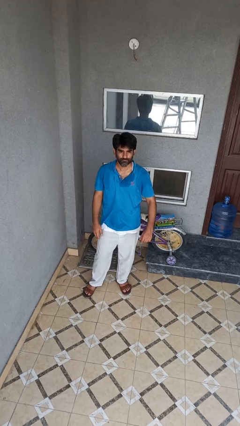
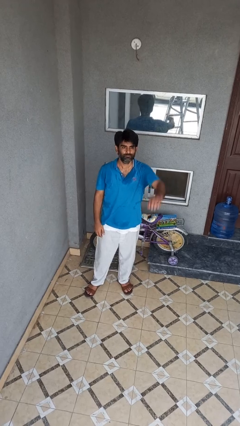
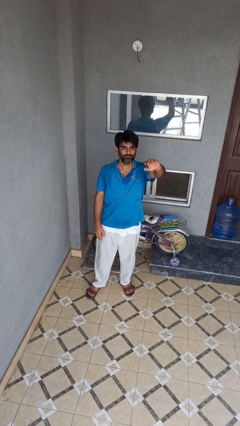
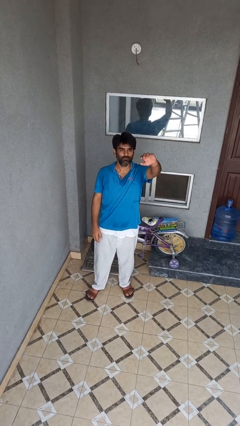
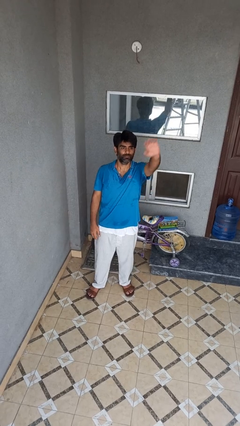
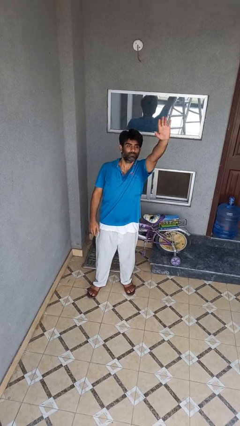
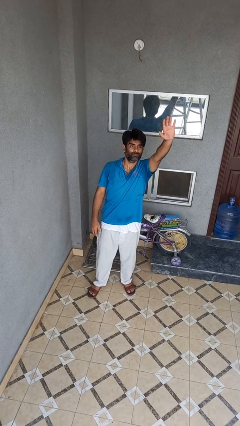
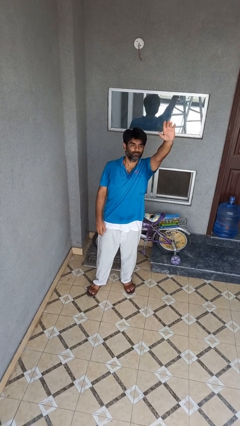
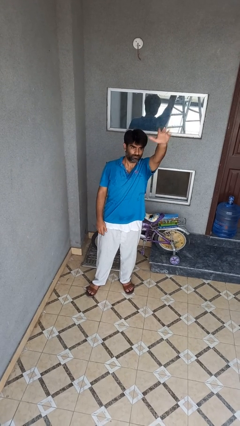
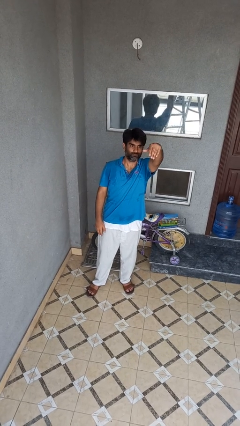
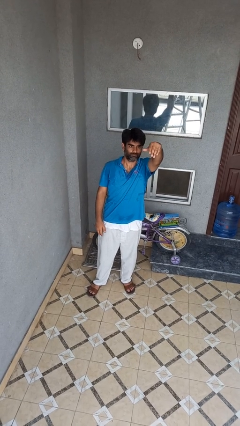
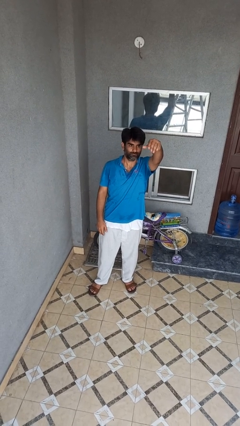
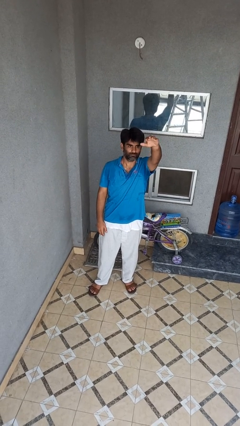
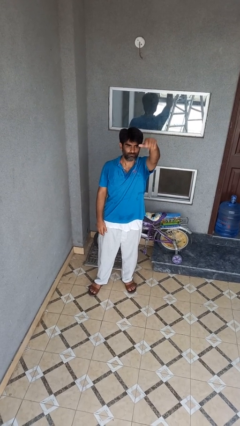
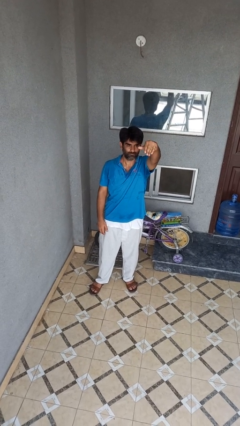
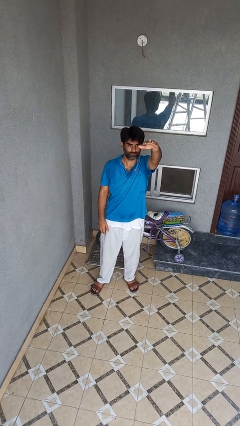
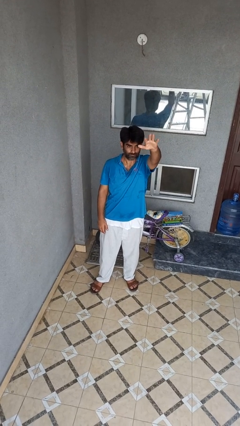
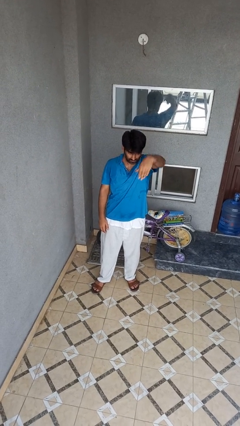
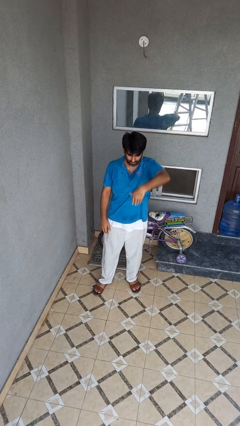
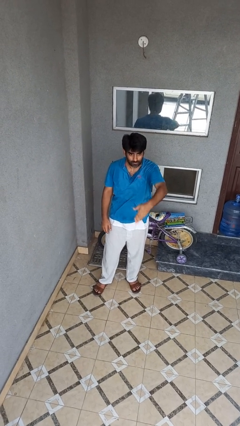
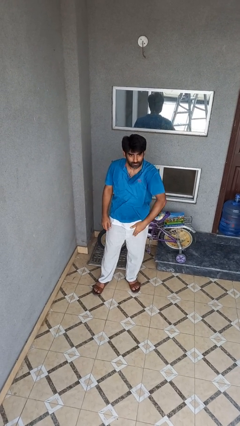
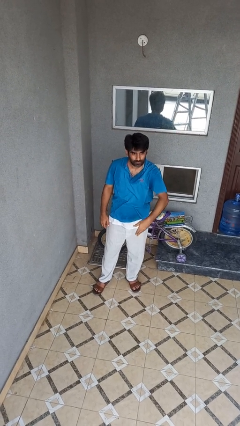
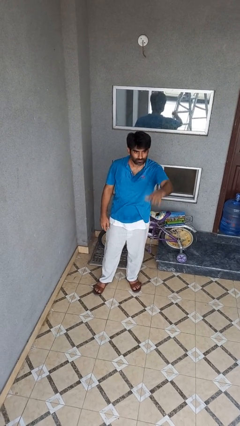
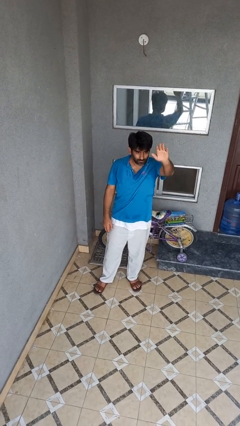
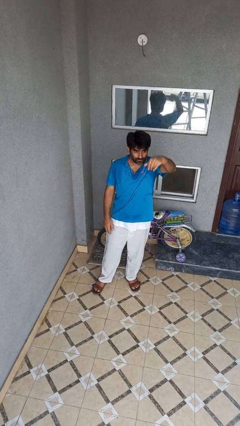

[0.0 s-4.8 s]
person gestures come here

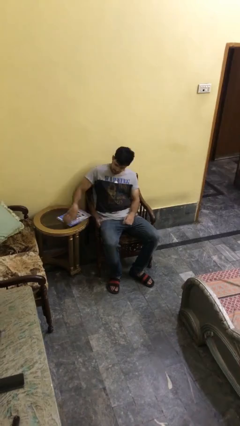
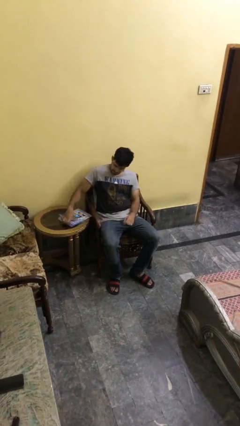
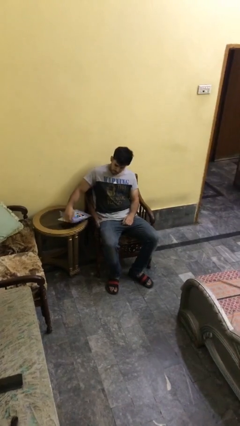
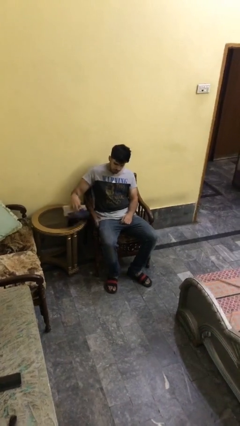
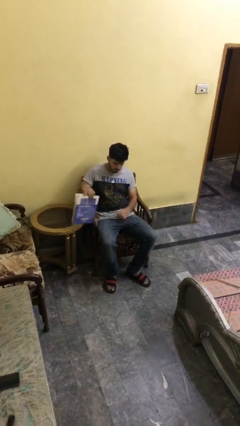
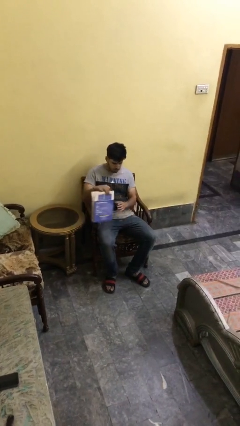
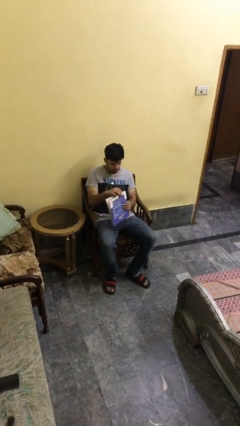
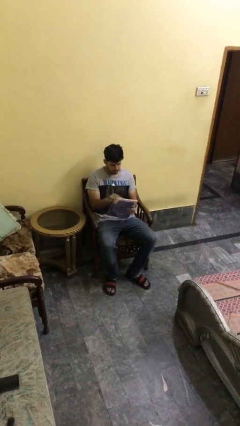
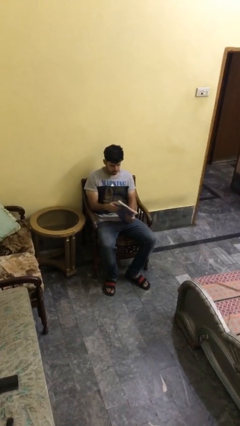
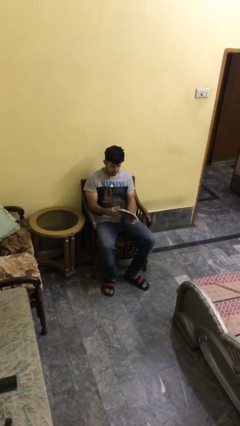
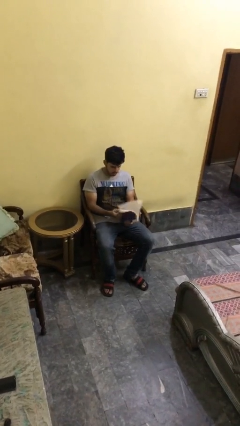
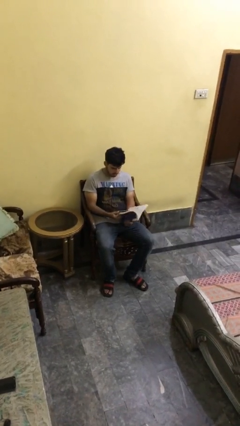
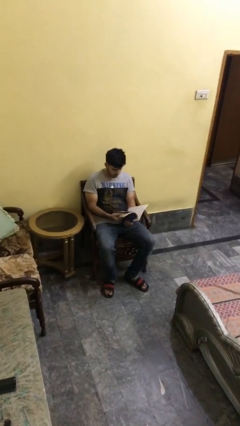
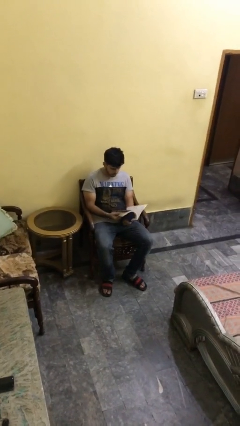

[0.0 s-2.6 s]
person picks up object from table

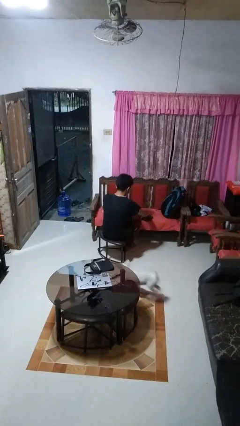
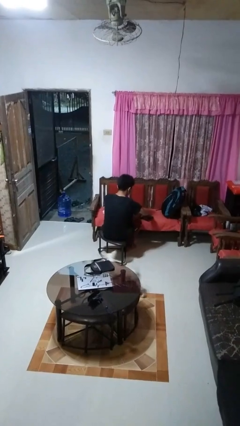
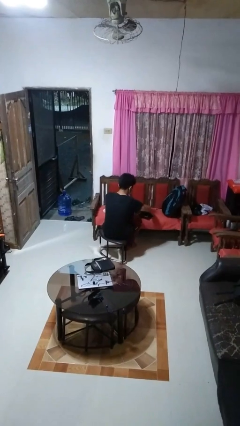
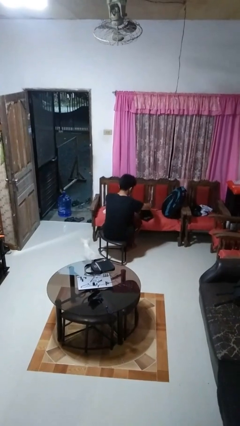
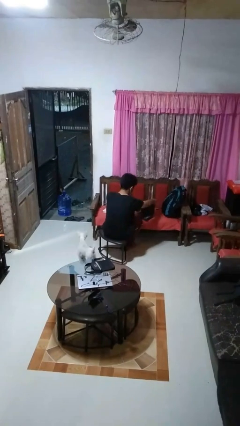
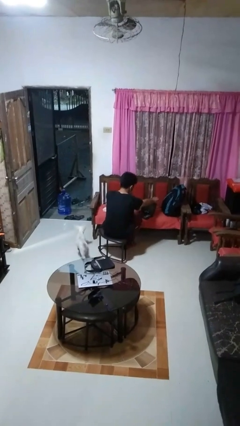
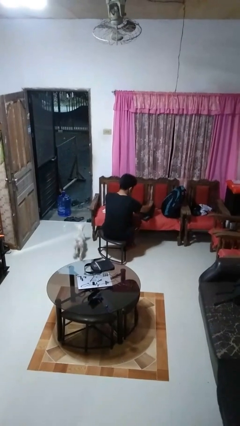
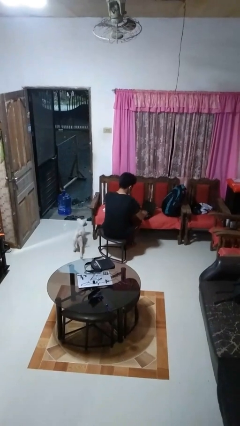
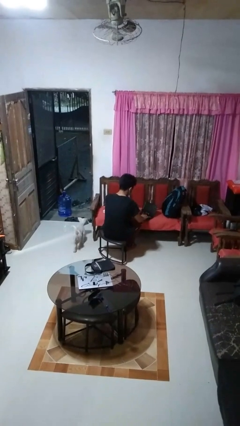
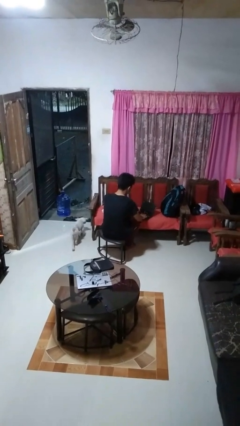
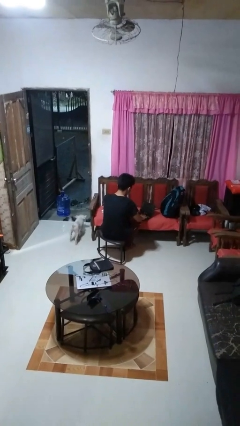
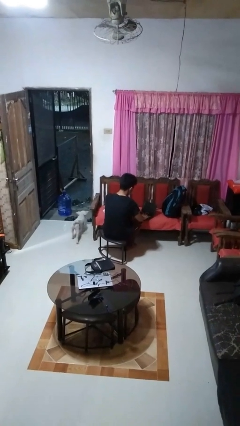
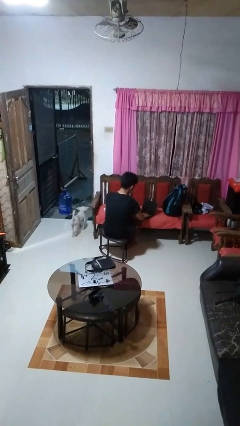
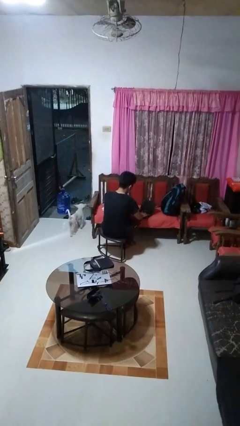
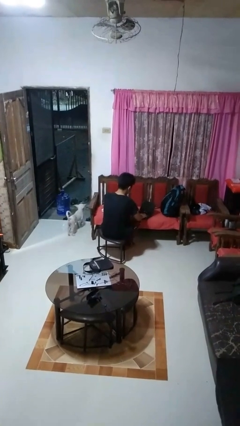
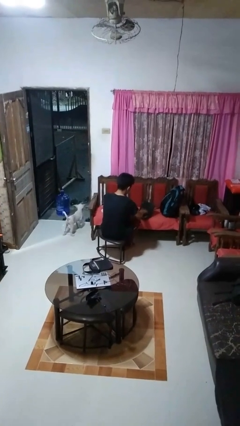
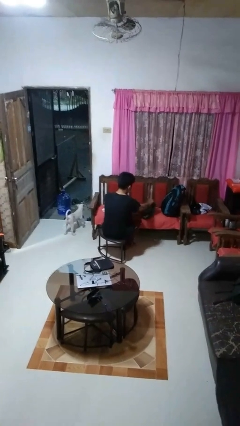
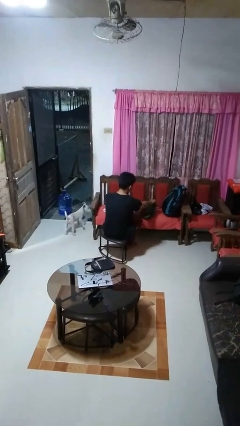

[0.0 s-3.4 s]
person opens laptop

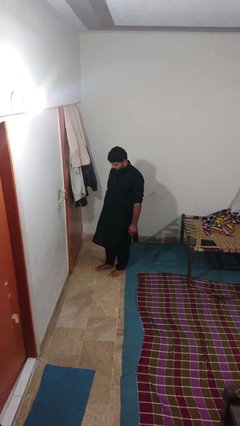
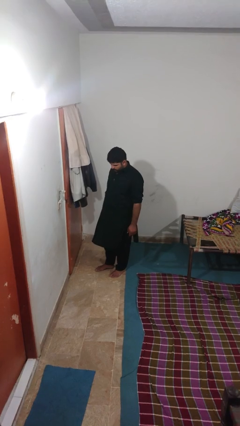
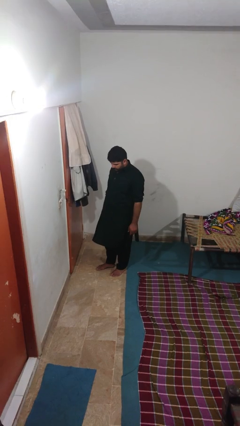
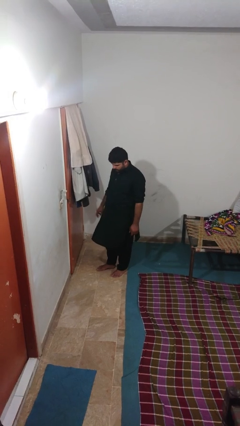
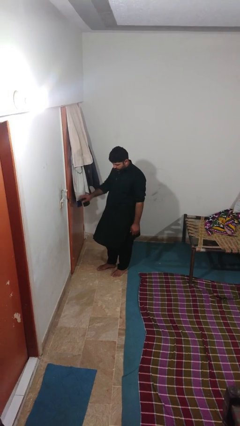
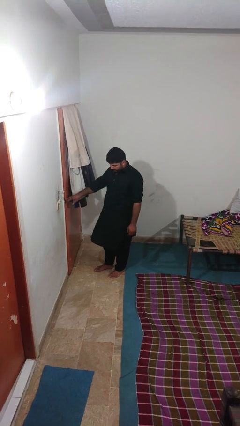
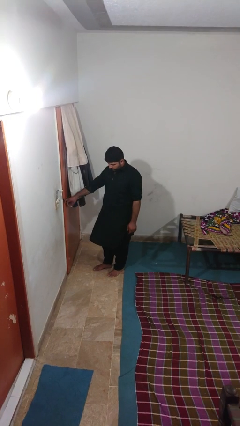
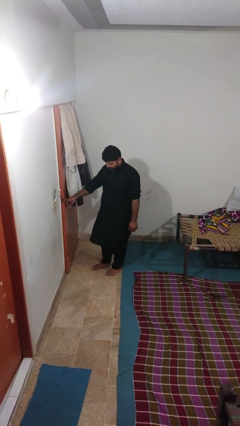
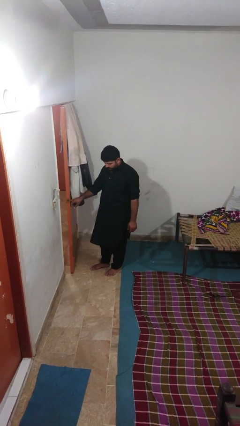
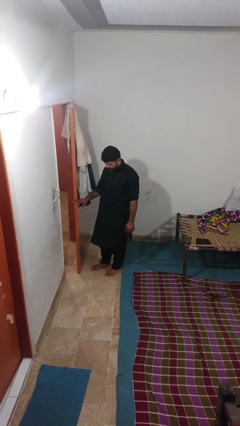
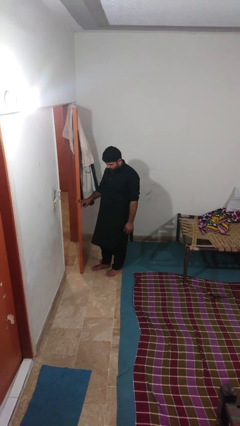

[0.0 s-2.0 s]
person opens facility door

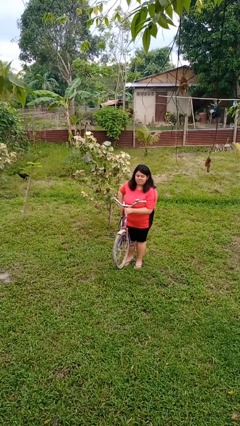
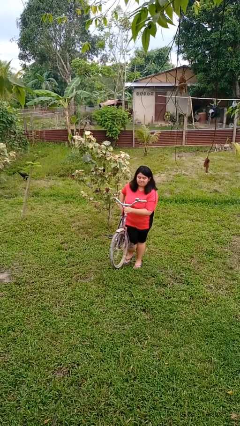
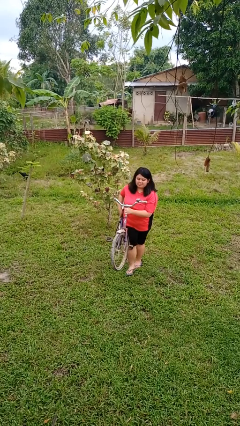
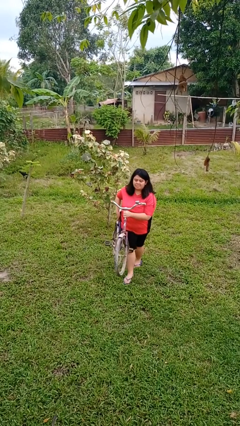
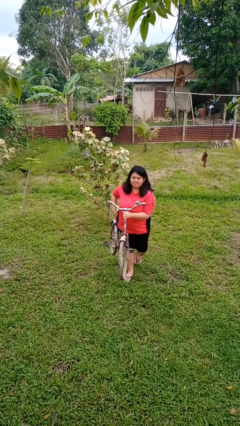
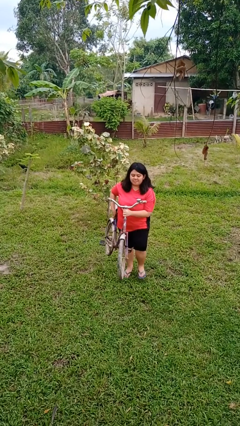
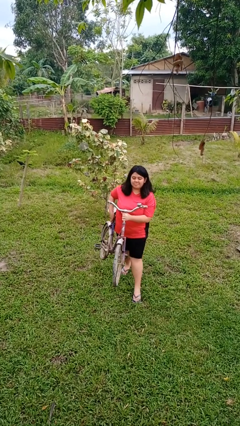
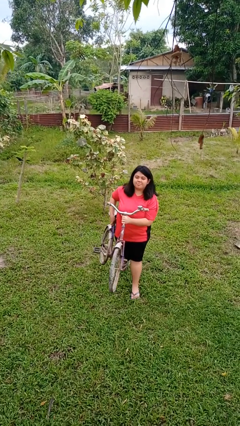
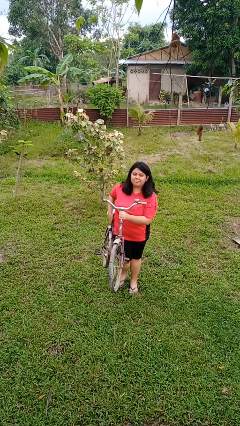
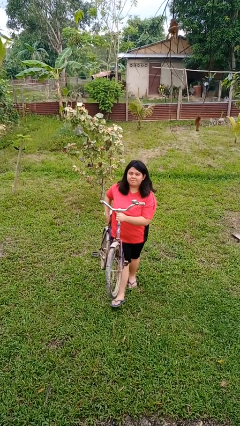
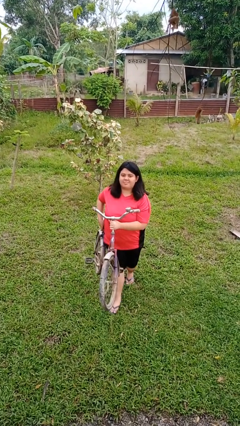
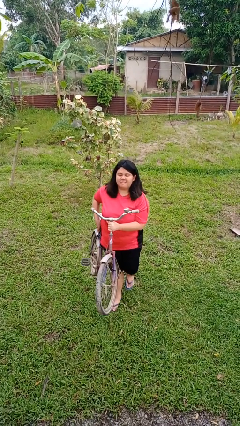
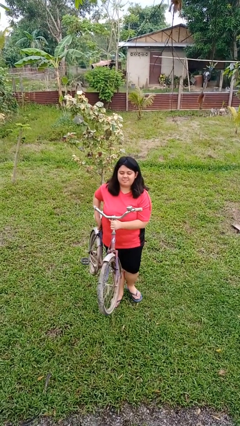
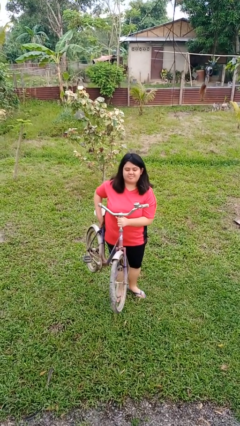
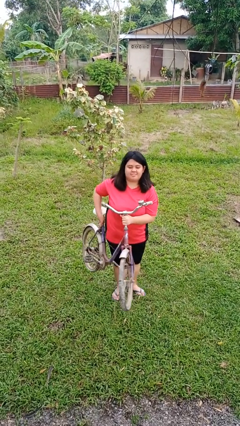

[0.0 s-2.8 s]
person carries bicycle

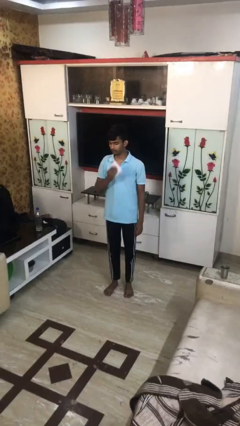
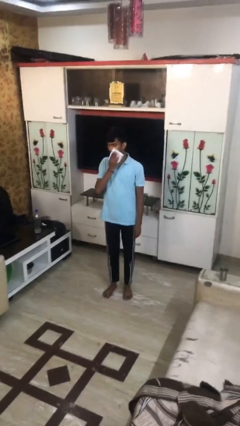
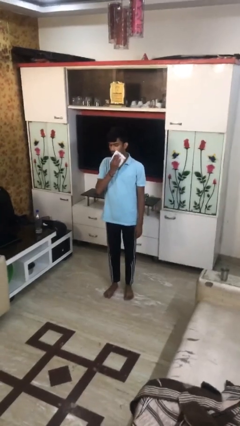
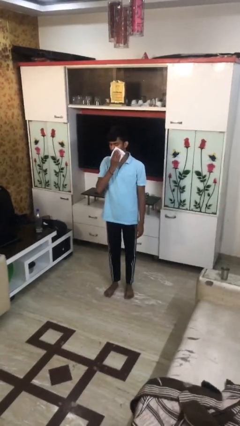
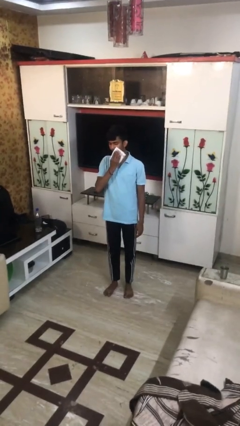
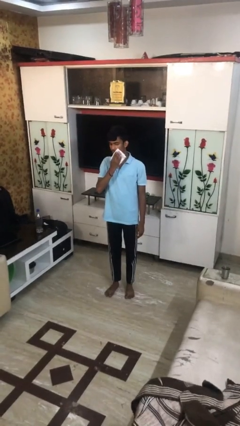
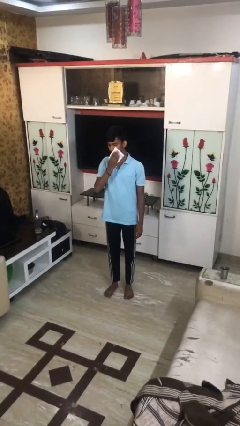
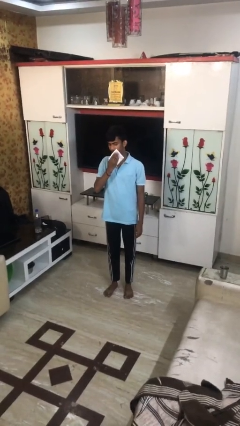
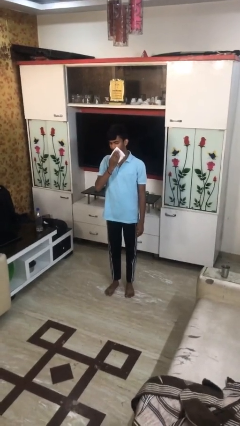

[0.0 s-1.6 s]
person wipes mouth with napkin
